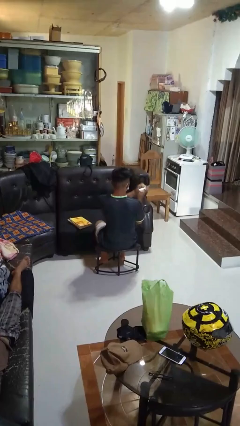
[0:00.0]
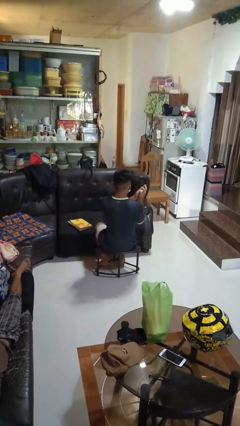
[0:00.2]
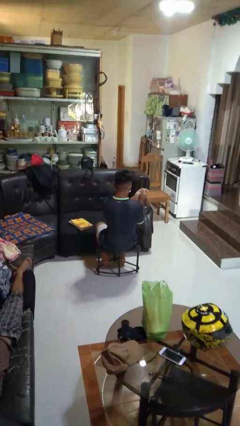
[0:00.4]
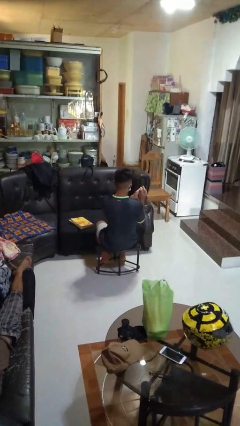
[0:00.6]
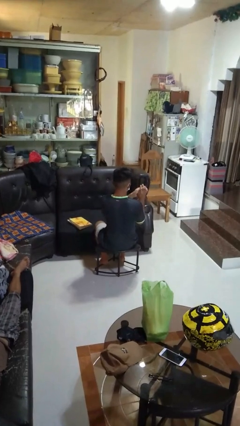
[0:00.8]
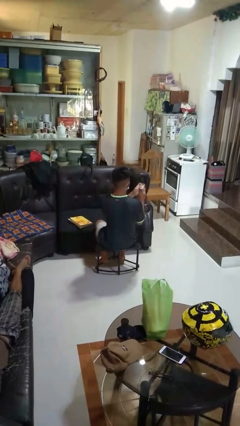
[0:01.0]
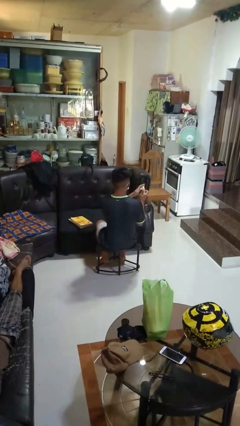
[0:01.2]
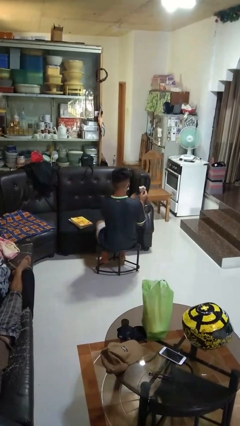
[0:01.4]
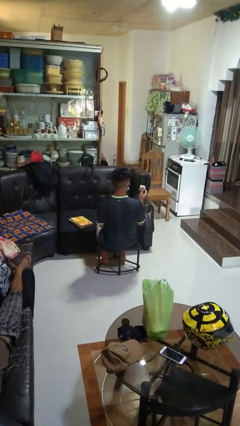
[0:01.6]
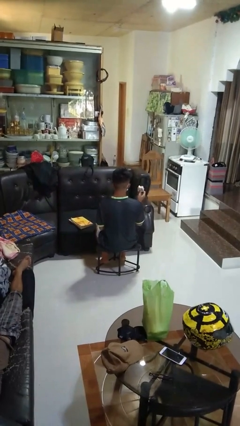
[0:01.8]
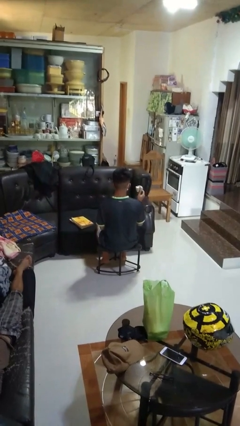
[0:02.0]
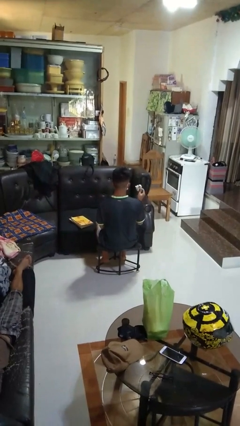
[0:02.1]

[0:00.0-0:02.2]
person crumples paper

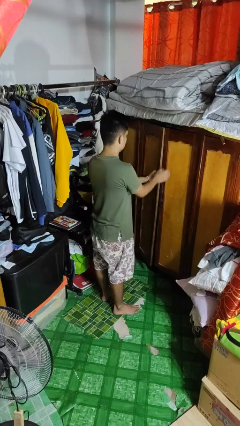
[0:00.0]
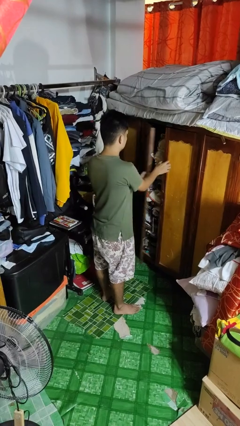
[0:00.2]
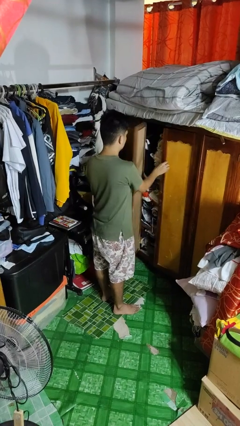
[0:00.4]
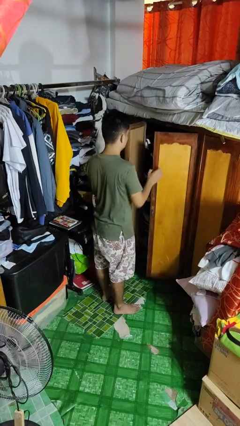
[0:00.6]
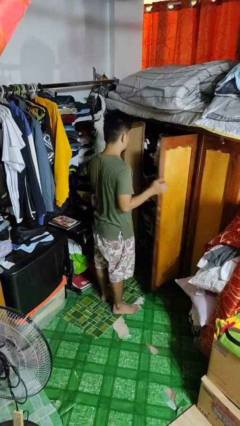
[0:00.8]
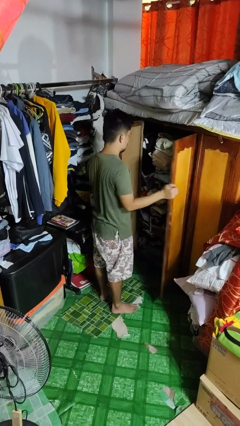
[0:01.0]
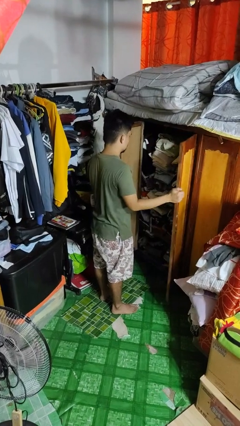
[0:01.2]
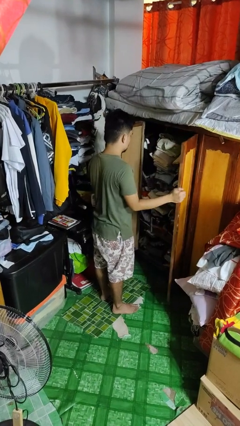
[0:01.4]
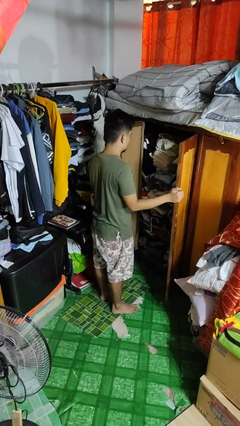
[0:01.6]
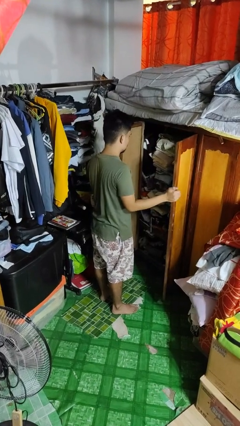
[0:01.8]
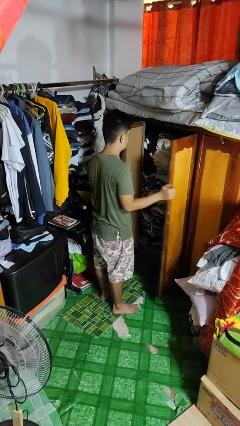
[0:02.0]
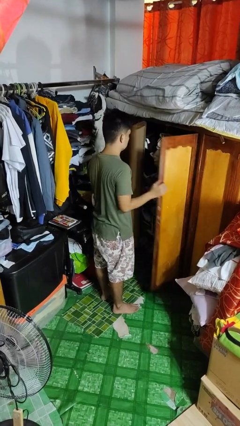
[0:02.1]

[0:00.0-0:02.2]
person opens closet door

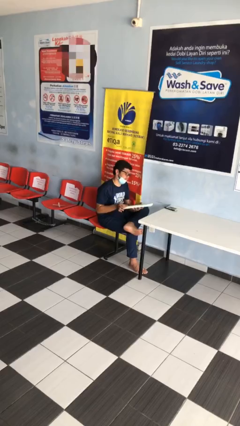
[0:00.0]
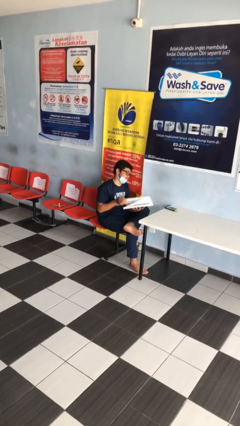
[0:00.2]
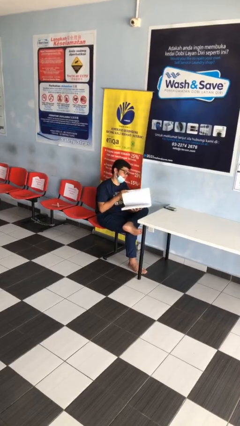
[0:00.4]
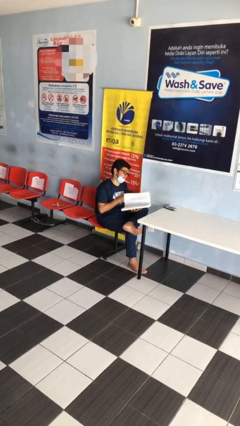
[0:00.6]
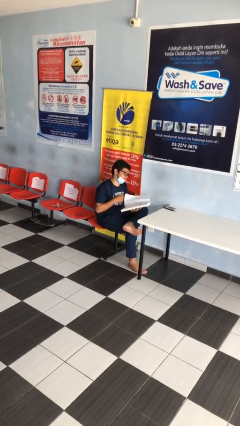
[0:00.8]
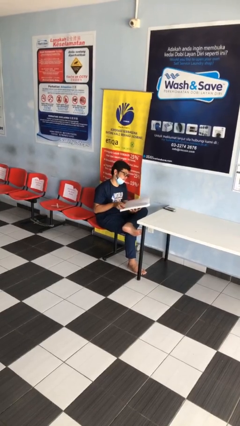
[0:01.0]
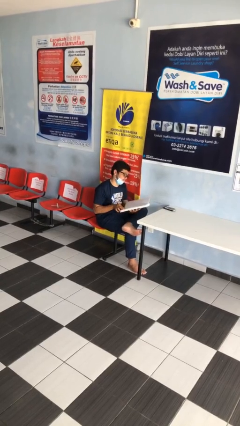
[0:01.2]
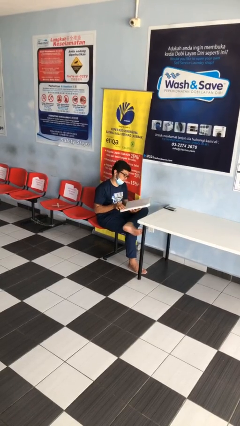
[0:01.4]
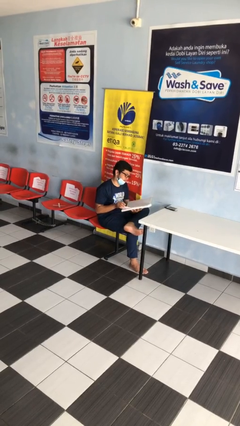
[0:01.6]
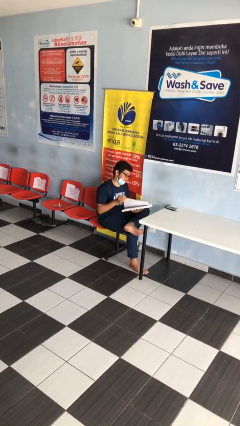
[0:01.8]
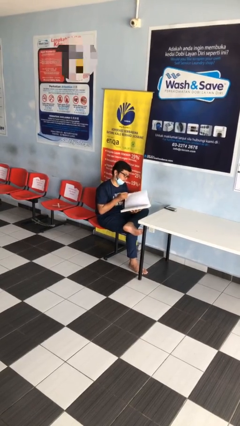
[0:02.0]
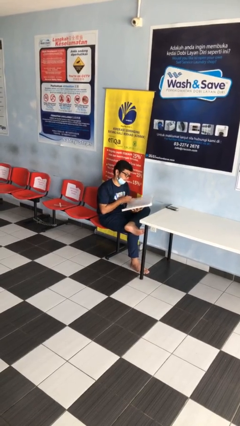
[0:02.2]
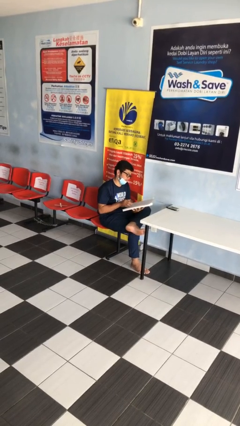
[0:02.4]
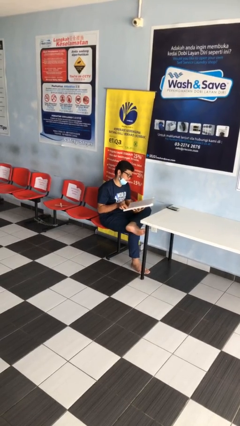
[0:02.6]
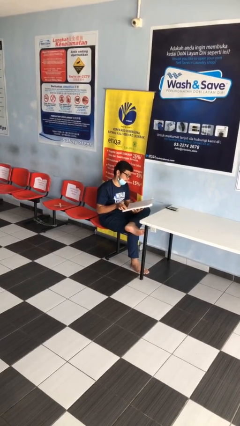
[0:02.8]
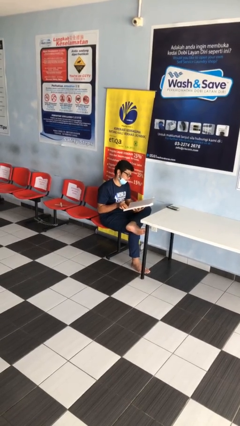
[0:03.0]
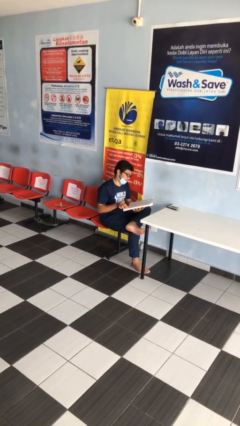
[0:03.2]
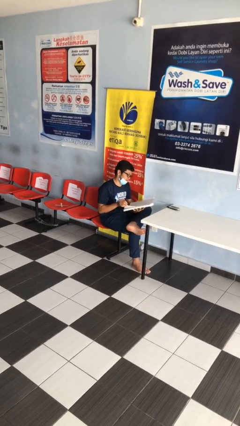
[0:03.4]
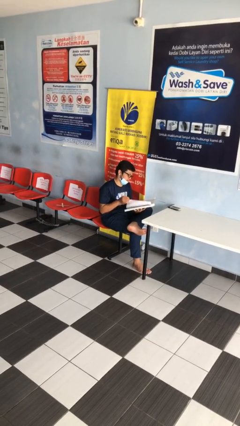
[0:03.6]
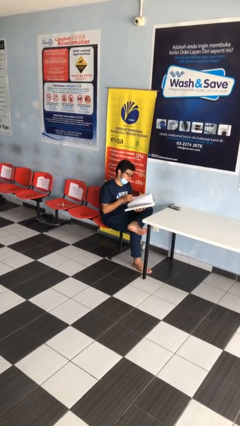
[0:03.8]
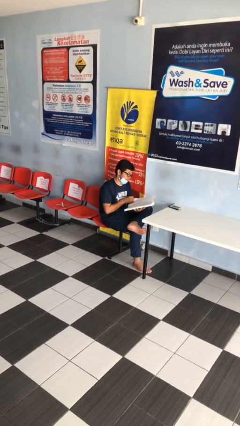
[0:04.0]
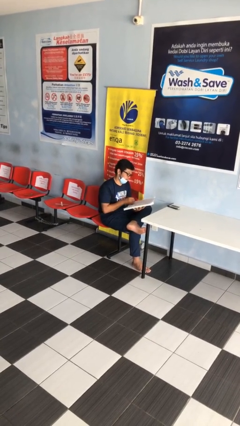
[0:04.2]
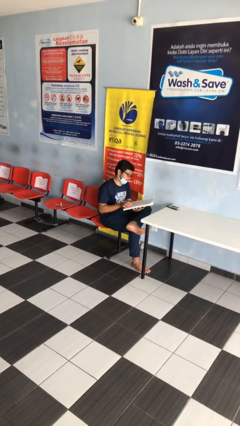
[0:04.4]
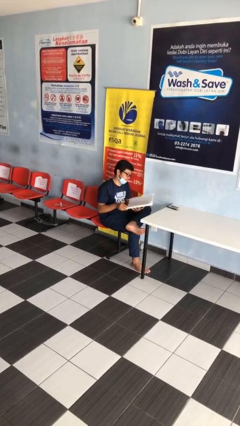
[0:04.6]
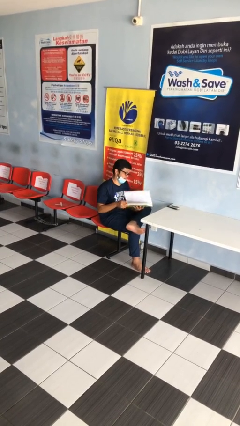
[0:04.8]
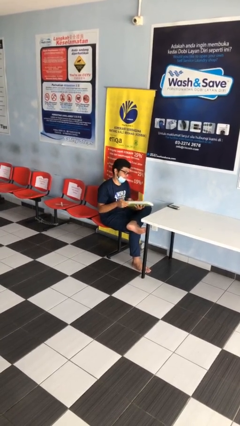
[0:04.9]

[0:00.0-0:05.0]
person reads document

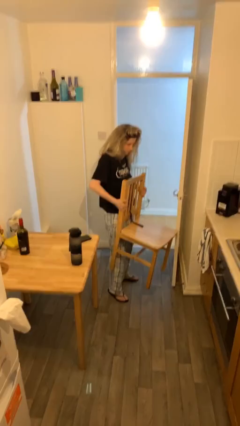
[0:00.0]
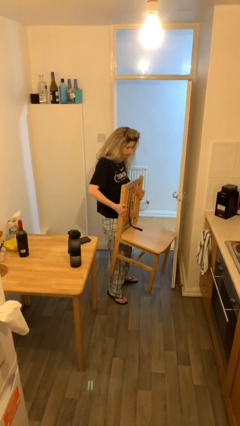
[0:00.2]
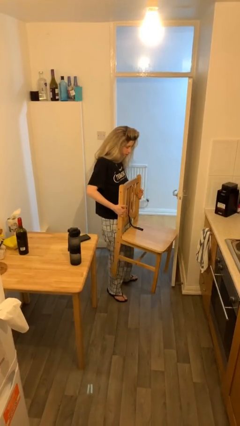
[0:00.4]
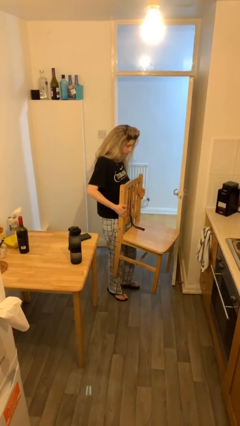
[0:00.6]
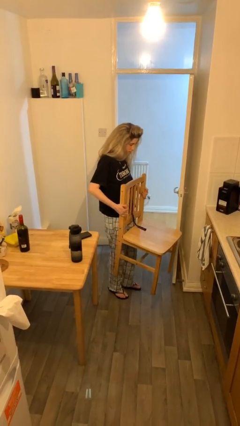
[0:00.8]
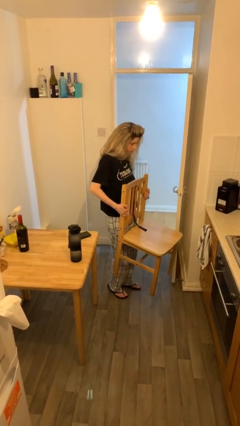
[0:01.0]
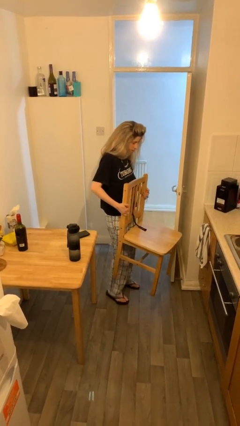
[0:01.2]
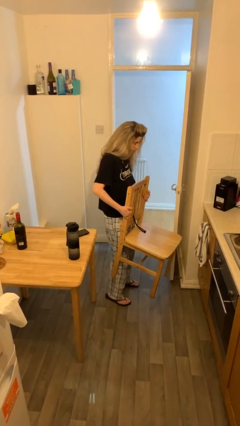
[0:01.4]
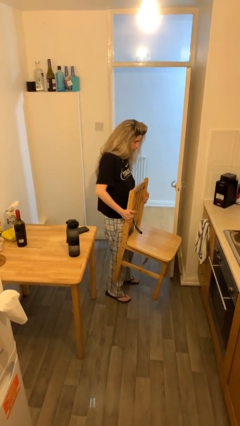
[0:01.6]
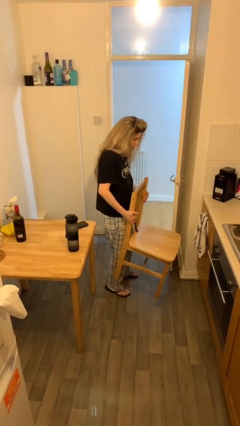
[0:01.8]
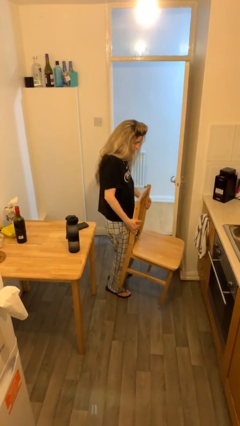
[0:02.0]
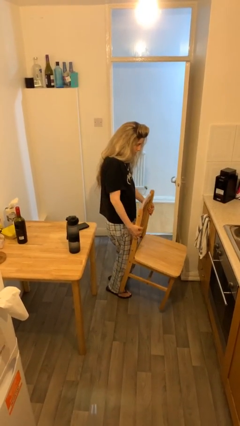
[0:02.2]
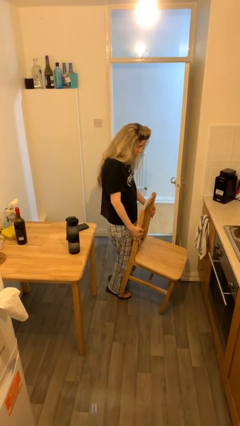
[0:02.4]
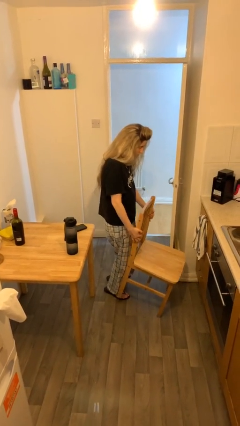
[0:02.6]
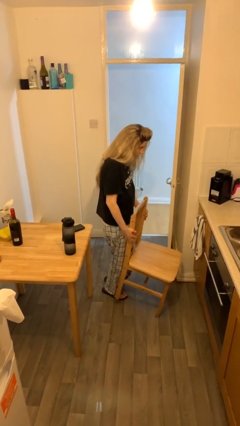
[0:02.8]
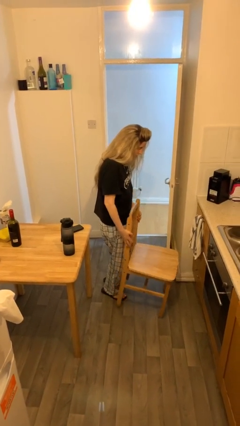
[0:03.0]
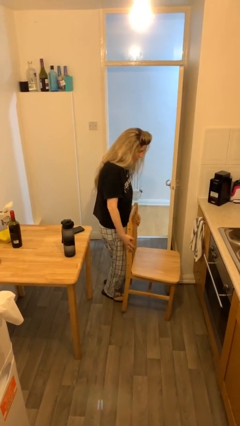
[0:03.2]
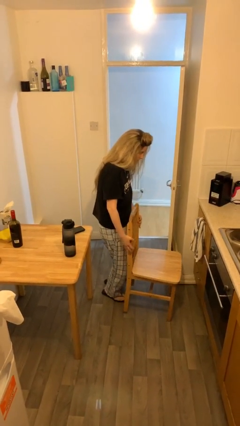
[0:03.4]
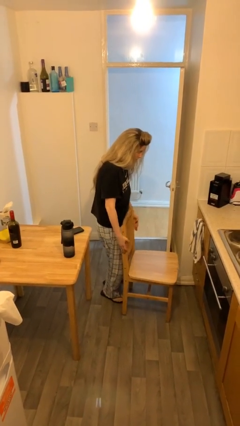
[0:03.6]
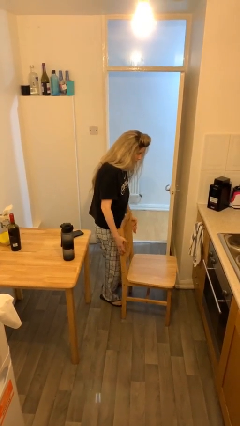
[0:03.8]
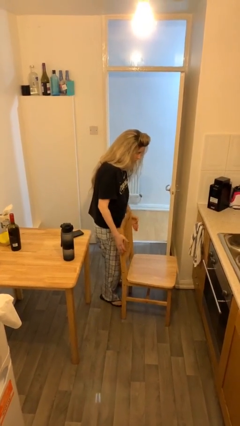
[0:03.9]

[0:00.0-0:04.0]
person puts down object on floor

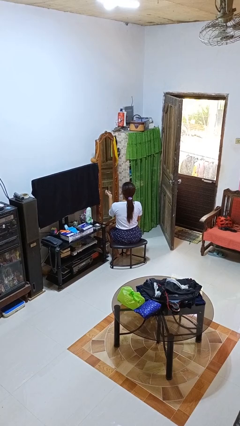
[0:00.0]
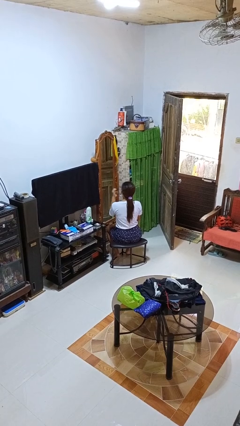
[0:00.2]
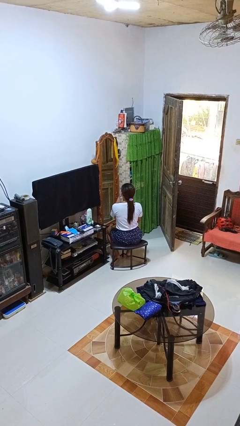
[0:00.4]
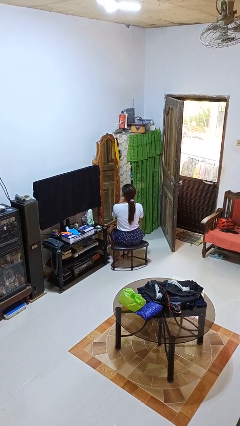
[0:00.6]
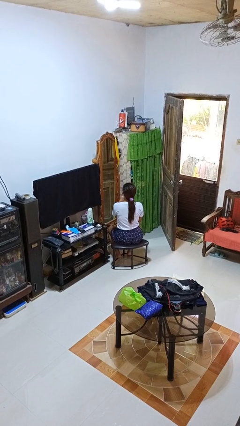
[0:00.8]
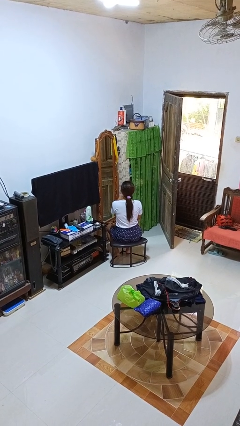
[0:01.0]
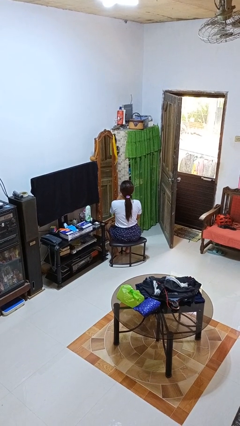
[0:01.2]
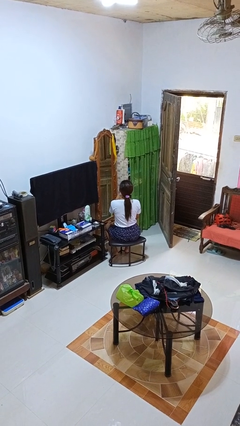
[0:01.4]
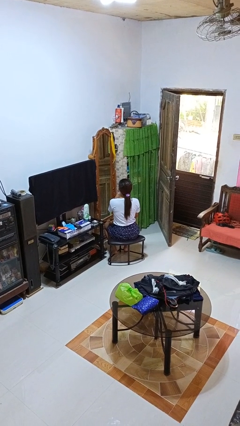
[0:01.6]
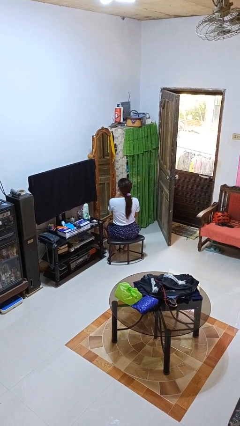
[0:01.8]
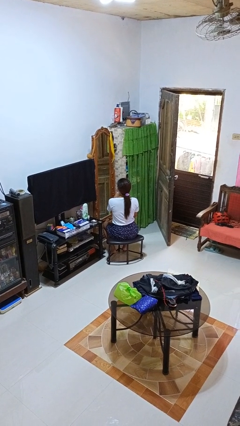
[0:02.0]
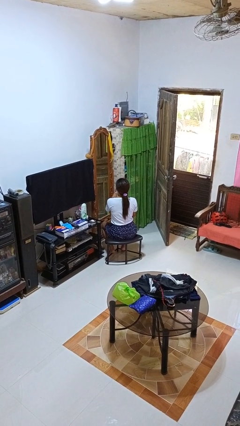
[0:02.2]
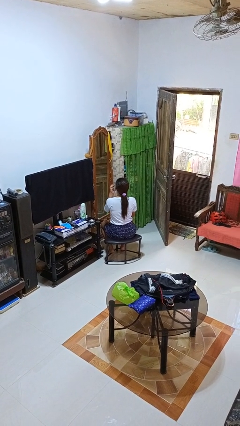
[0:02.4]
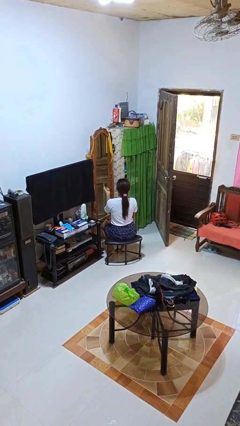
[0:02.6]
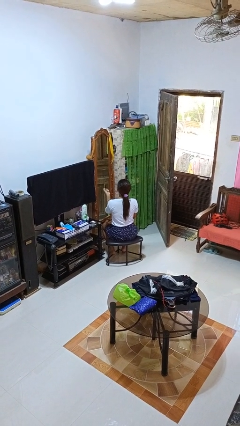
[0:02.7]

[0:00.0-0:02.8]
person applies lip makeup

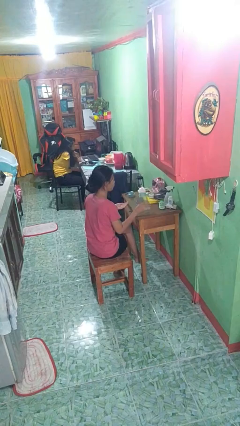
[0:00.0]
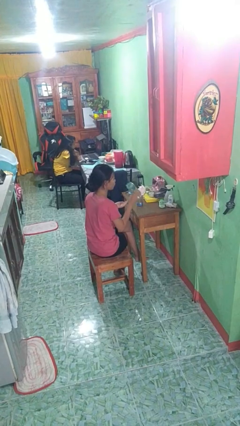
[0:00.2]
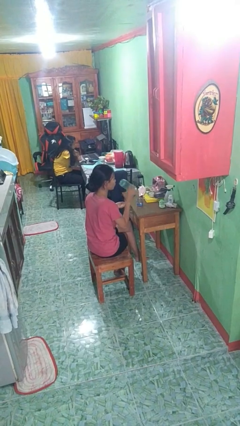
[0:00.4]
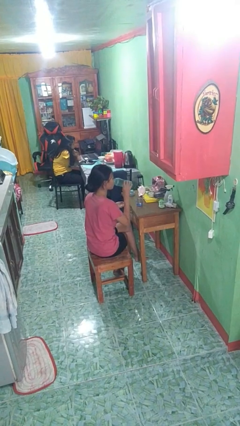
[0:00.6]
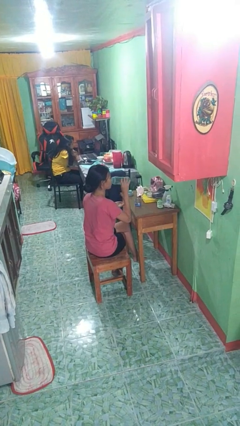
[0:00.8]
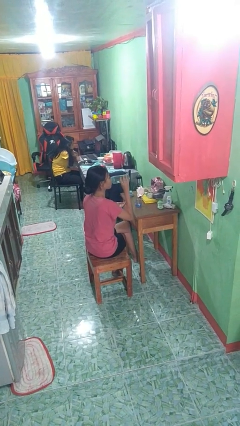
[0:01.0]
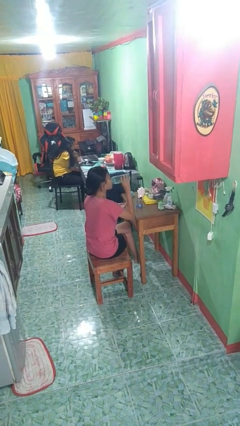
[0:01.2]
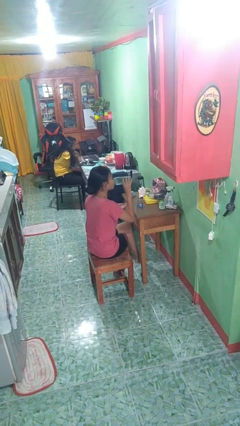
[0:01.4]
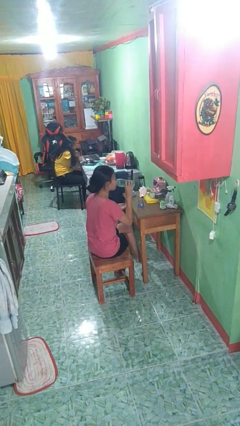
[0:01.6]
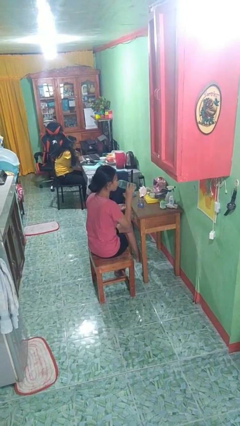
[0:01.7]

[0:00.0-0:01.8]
person drinks from cup
